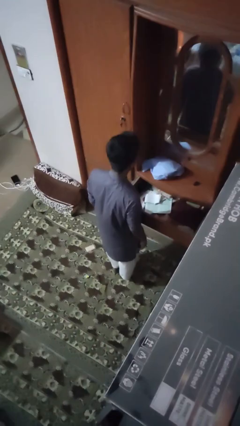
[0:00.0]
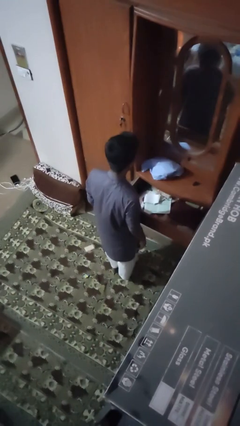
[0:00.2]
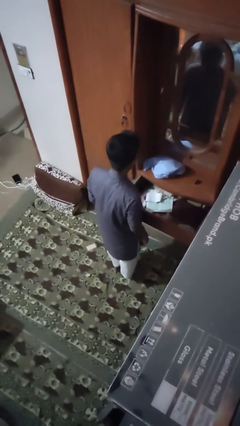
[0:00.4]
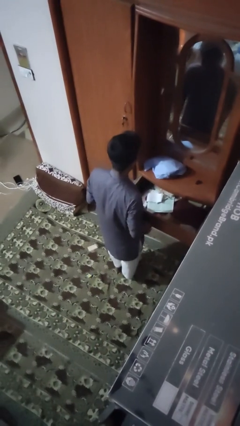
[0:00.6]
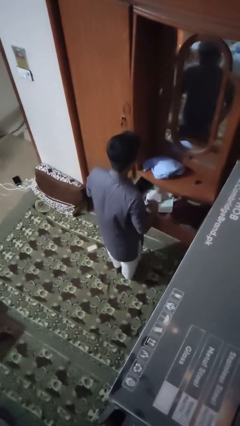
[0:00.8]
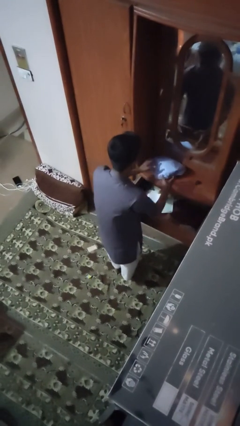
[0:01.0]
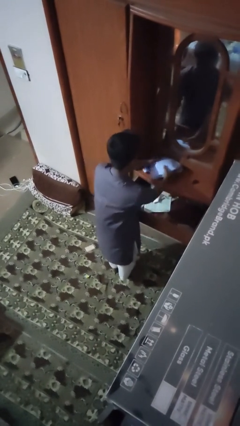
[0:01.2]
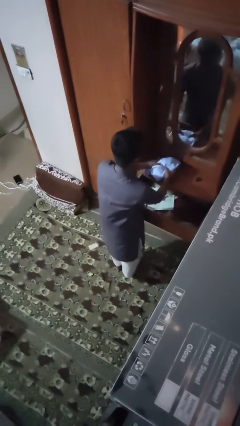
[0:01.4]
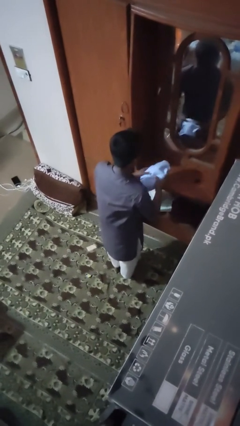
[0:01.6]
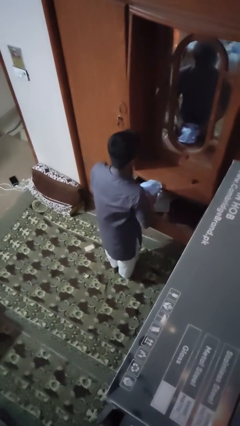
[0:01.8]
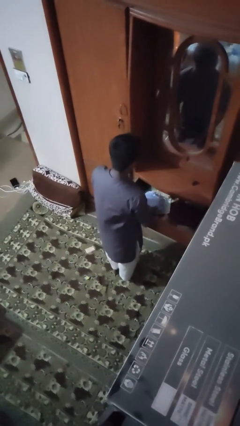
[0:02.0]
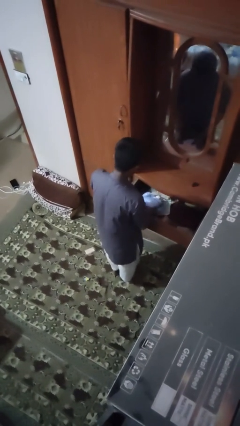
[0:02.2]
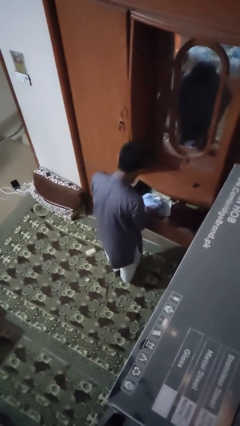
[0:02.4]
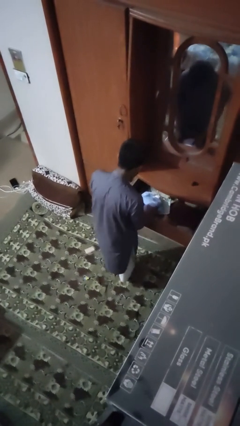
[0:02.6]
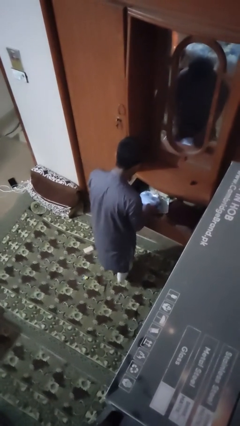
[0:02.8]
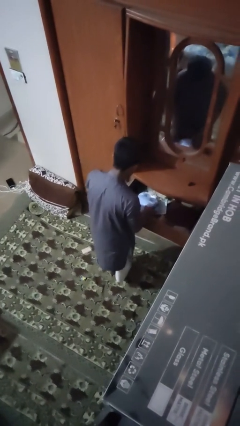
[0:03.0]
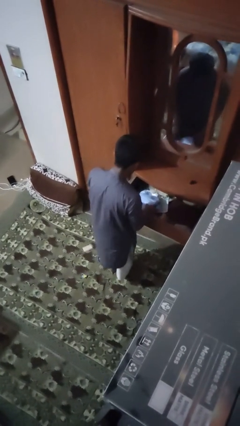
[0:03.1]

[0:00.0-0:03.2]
person puts clothes into dresser

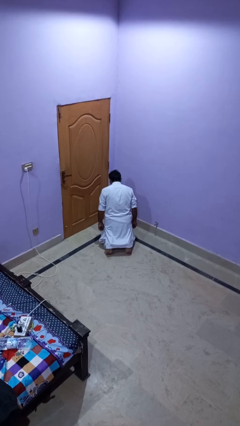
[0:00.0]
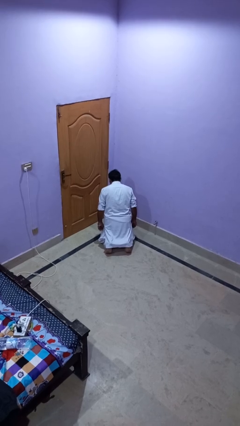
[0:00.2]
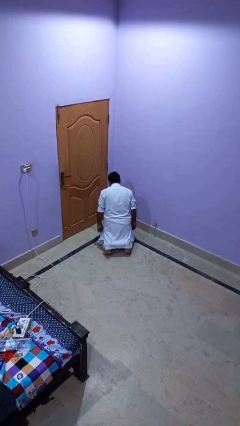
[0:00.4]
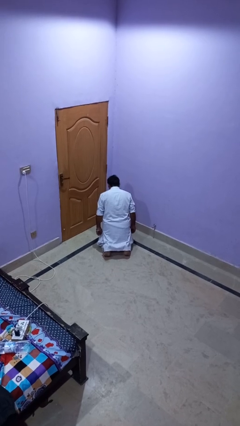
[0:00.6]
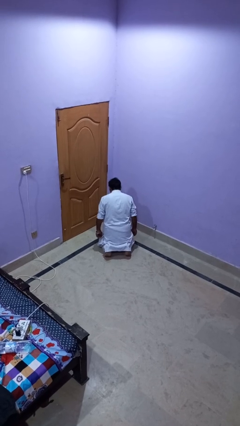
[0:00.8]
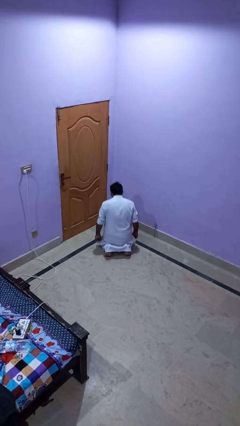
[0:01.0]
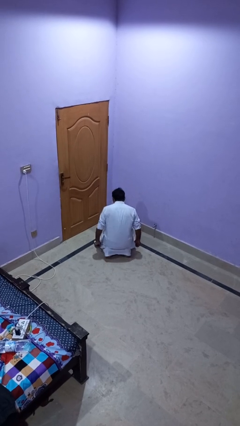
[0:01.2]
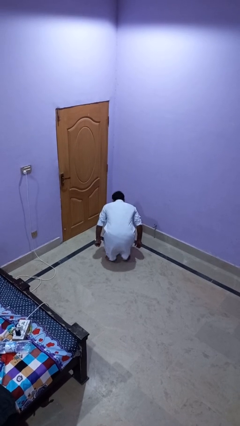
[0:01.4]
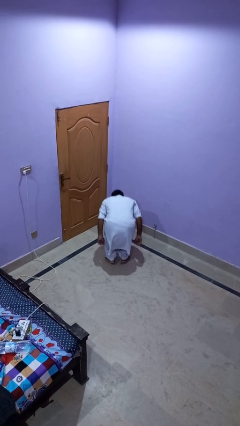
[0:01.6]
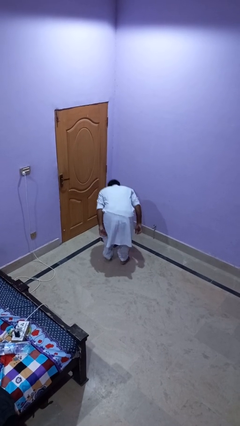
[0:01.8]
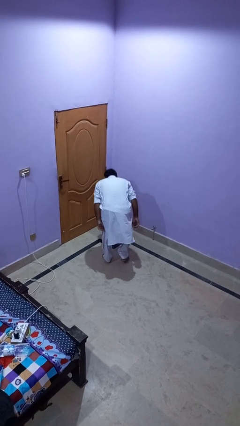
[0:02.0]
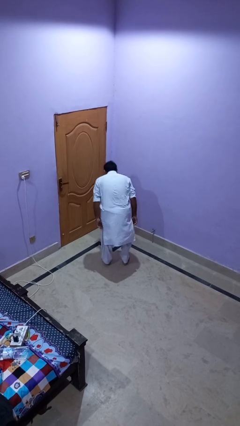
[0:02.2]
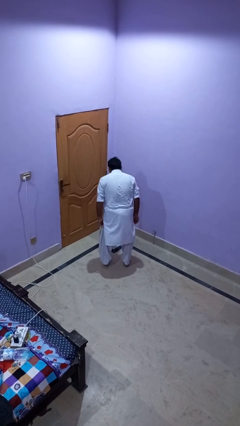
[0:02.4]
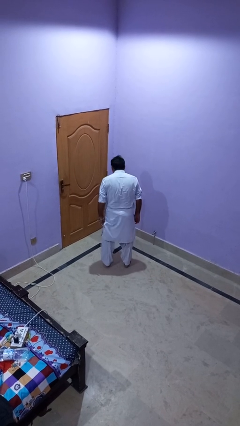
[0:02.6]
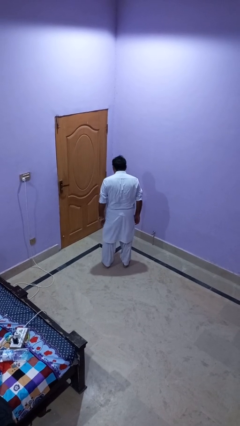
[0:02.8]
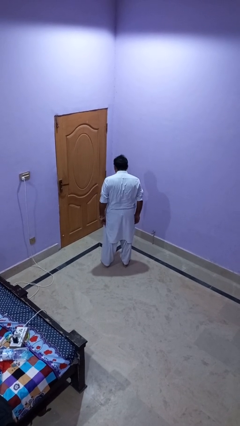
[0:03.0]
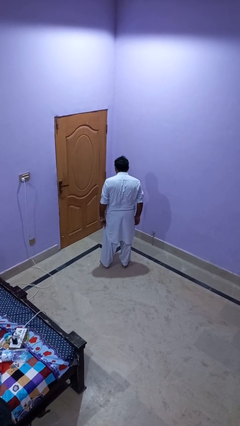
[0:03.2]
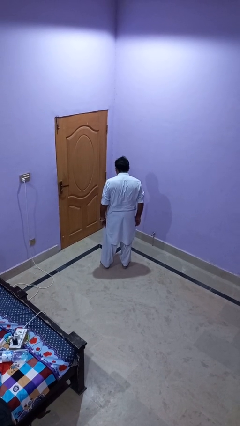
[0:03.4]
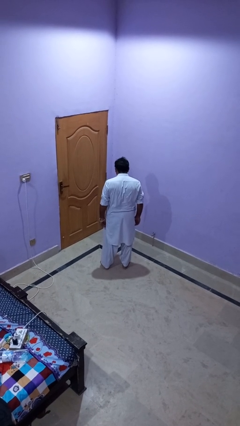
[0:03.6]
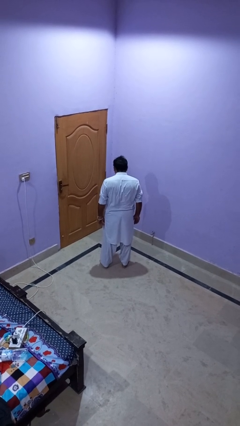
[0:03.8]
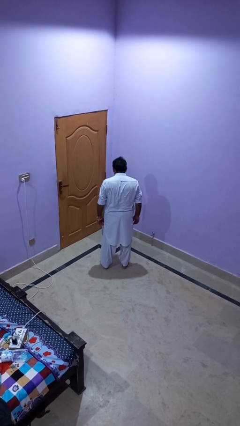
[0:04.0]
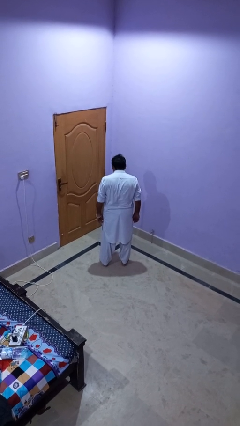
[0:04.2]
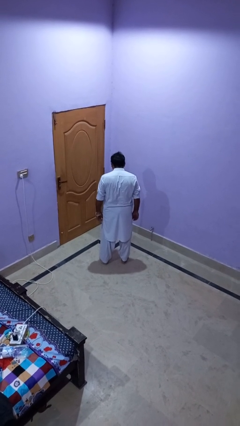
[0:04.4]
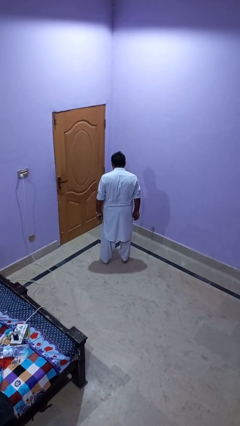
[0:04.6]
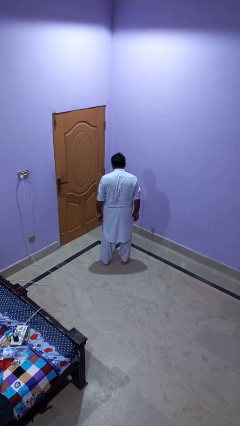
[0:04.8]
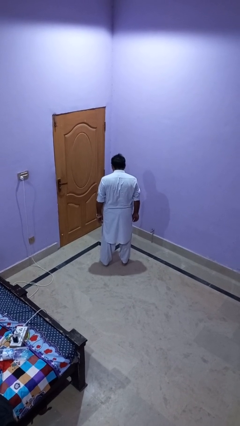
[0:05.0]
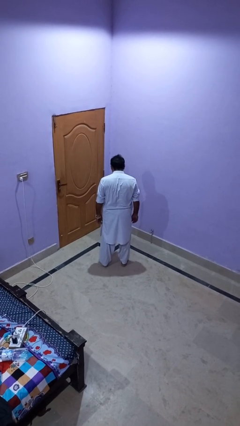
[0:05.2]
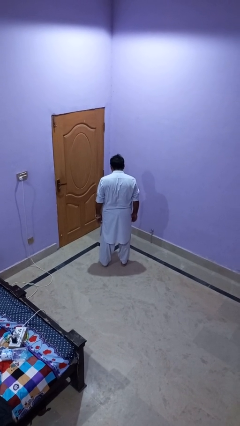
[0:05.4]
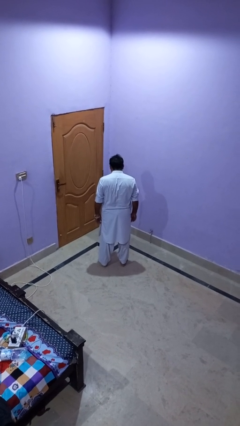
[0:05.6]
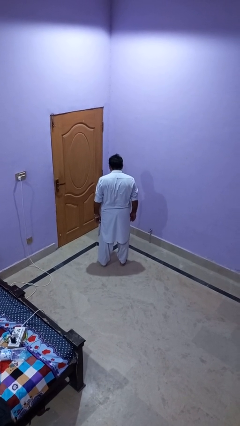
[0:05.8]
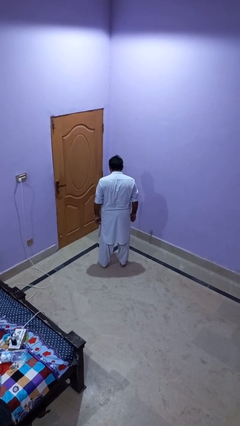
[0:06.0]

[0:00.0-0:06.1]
person stands up from floor

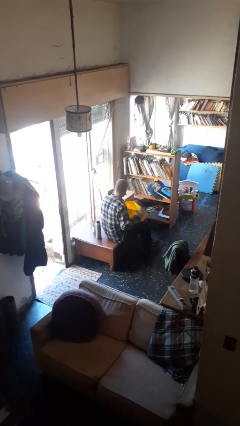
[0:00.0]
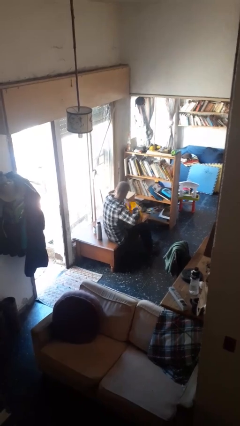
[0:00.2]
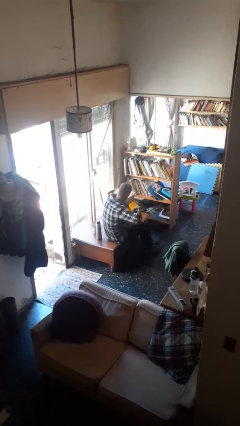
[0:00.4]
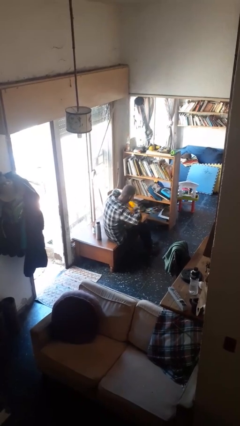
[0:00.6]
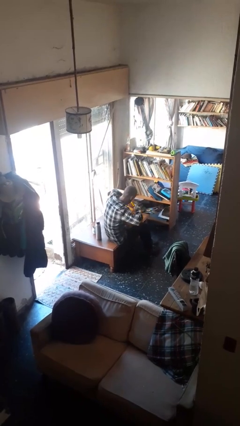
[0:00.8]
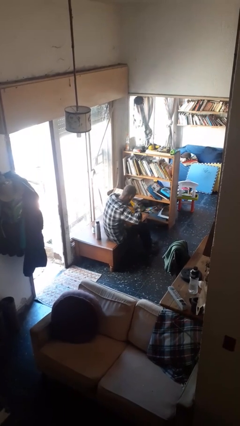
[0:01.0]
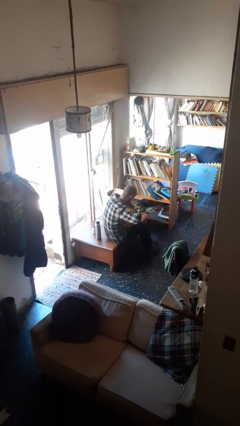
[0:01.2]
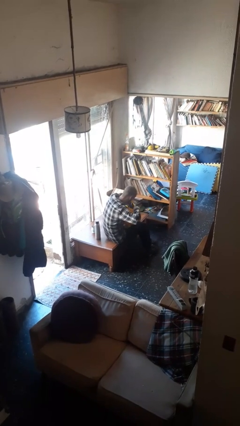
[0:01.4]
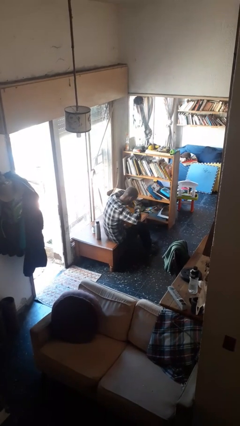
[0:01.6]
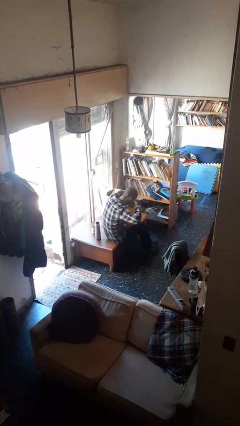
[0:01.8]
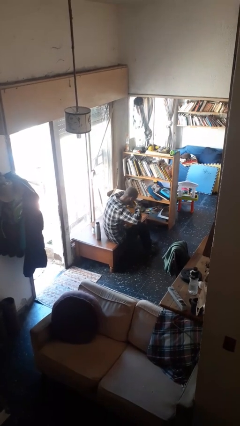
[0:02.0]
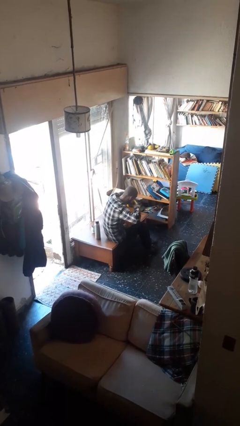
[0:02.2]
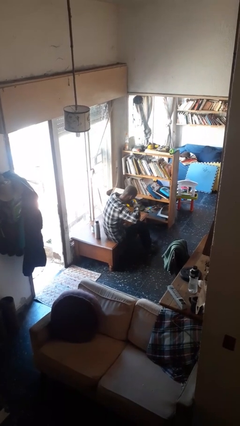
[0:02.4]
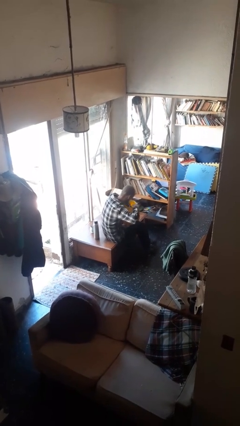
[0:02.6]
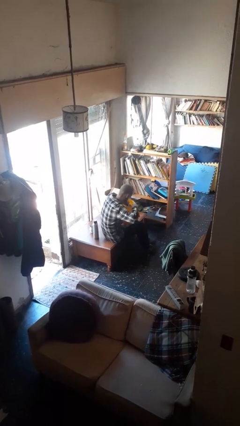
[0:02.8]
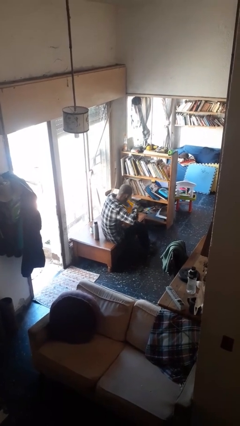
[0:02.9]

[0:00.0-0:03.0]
person searches in bag

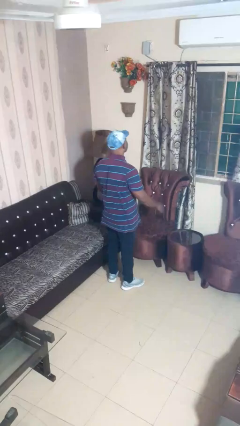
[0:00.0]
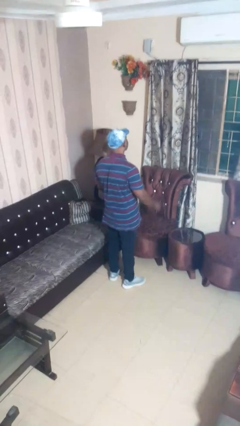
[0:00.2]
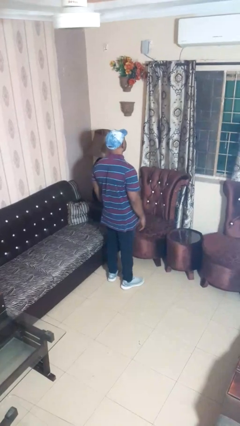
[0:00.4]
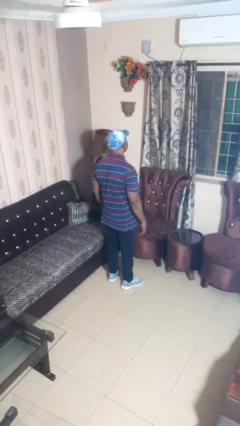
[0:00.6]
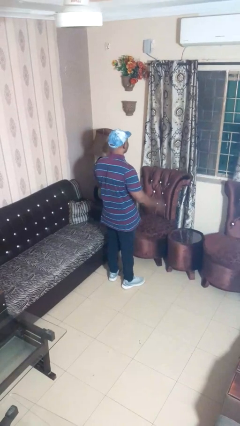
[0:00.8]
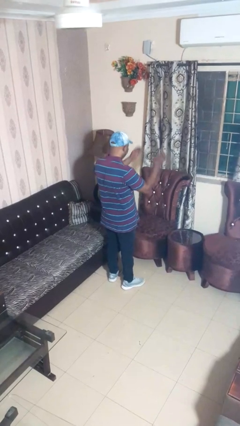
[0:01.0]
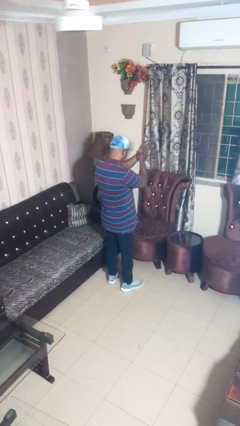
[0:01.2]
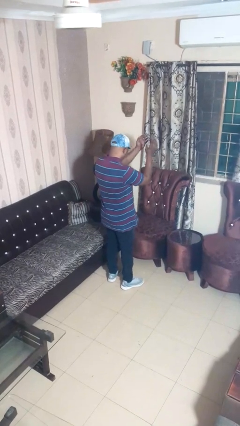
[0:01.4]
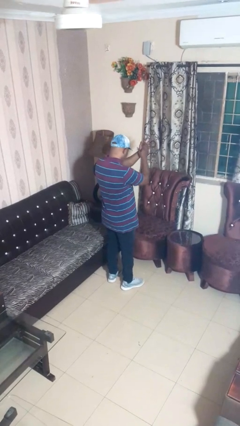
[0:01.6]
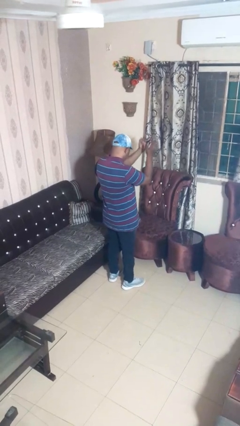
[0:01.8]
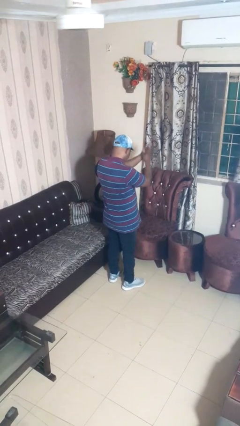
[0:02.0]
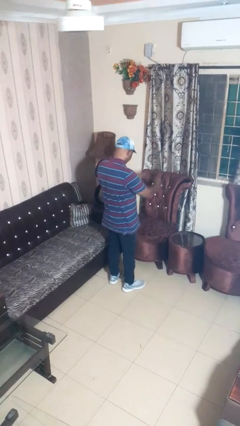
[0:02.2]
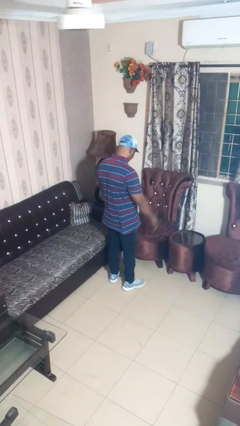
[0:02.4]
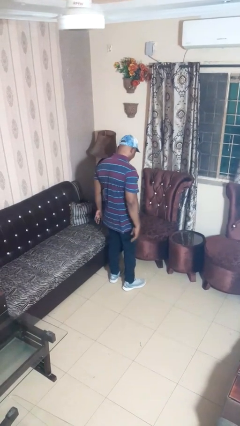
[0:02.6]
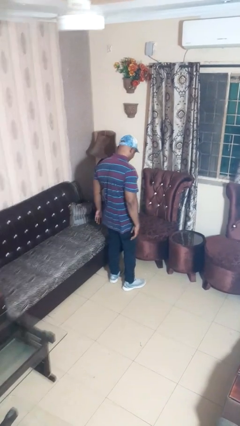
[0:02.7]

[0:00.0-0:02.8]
person claps hands

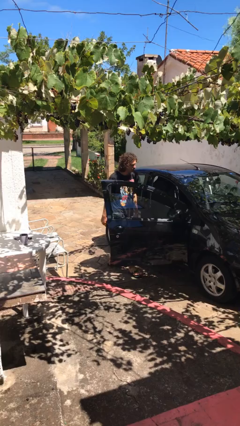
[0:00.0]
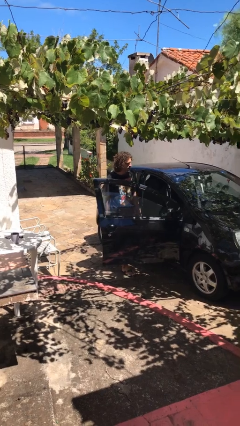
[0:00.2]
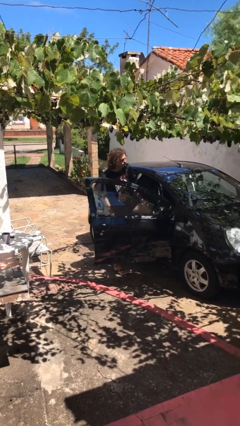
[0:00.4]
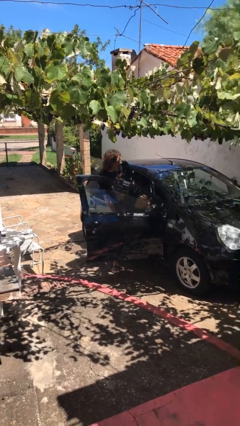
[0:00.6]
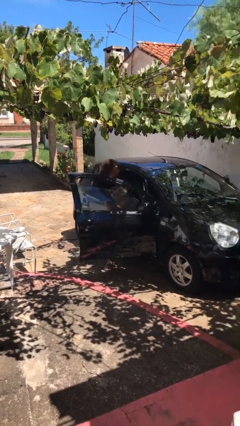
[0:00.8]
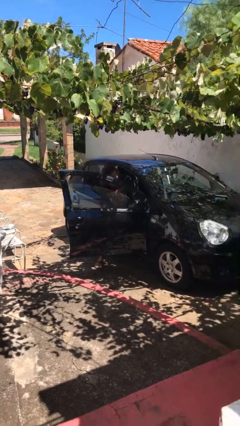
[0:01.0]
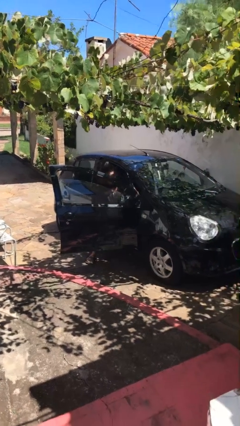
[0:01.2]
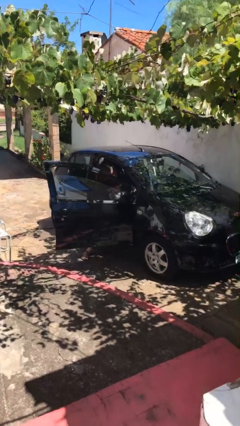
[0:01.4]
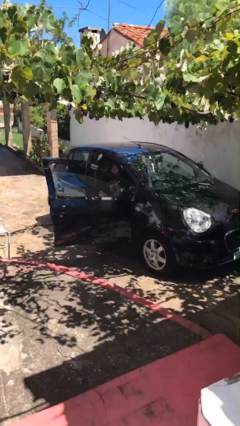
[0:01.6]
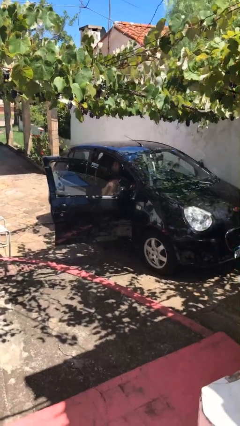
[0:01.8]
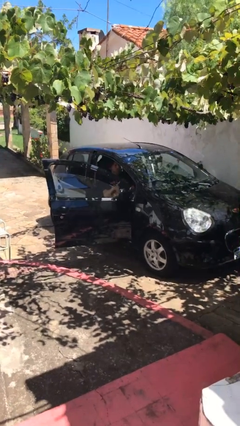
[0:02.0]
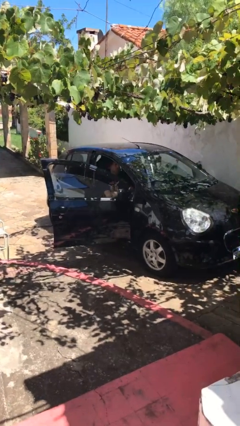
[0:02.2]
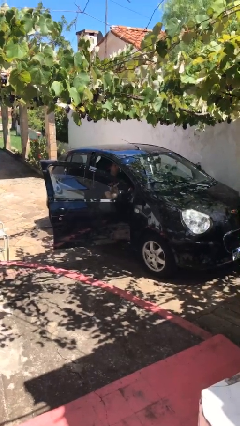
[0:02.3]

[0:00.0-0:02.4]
person enters car

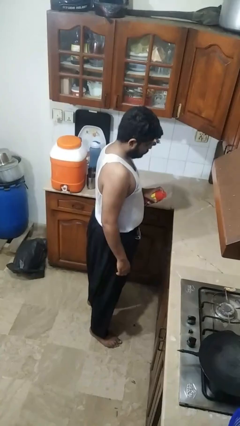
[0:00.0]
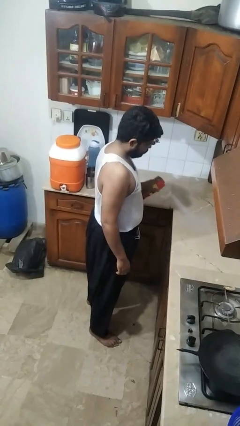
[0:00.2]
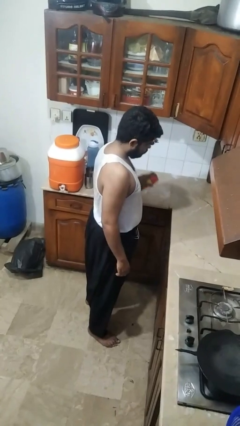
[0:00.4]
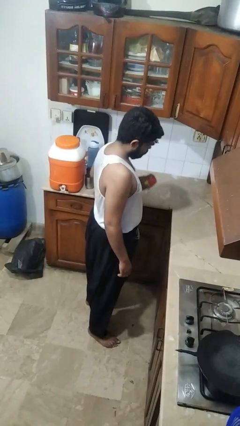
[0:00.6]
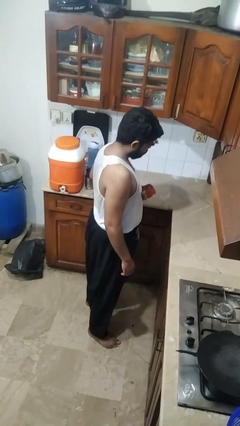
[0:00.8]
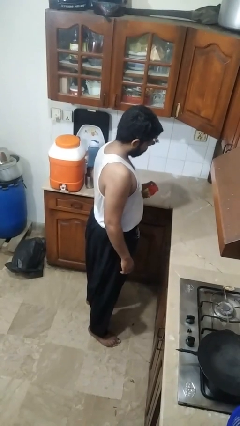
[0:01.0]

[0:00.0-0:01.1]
person sprays from bottle
